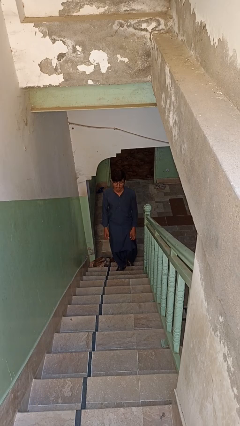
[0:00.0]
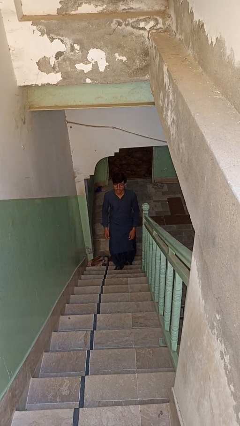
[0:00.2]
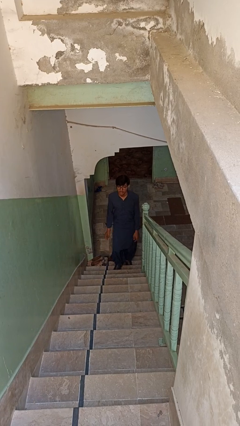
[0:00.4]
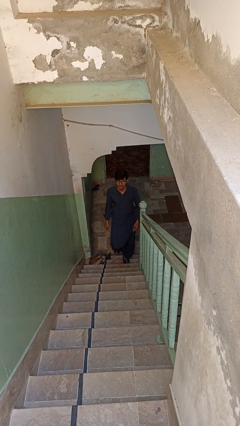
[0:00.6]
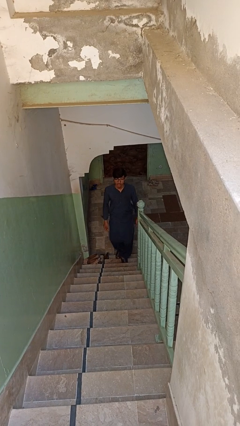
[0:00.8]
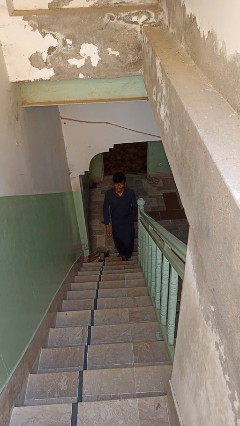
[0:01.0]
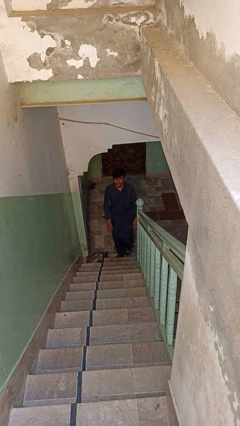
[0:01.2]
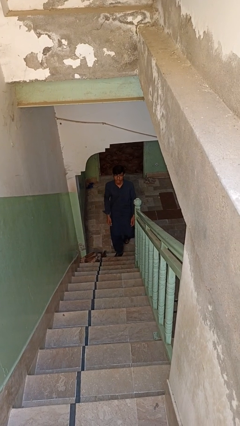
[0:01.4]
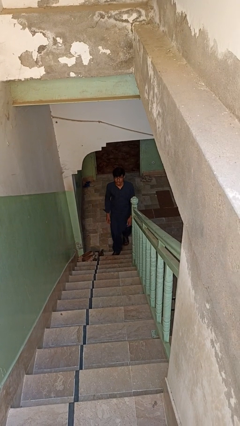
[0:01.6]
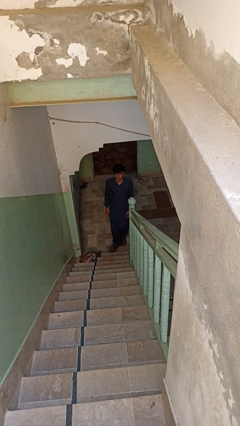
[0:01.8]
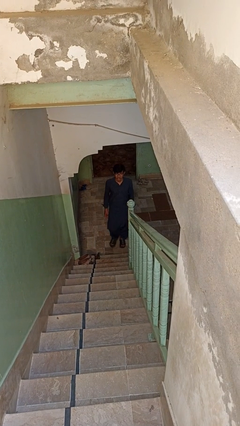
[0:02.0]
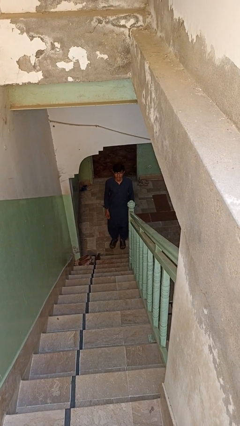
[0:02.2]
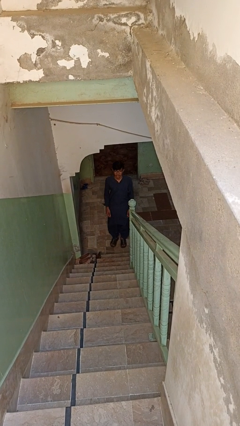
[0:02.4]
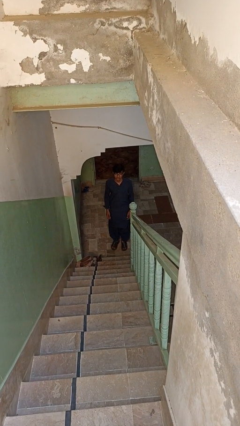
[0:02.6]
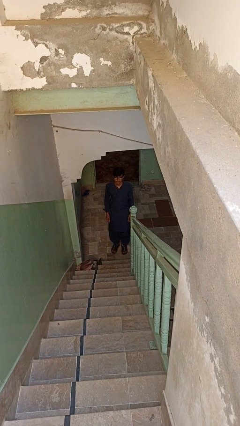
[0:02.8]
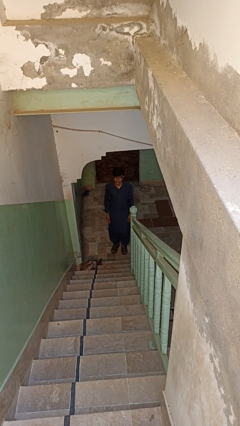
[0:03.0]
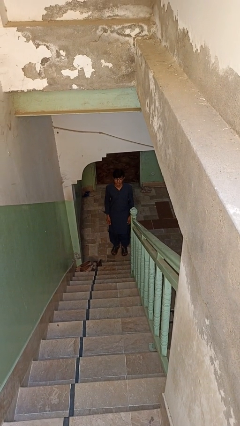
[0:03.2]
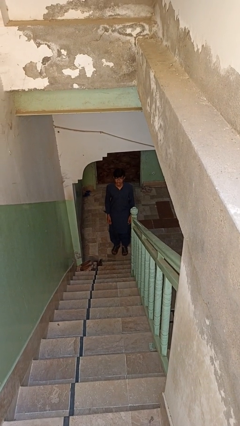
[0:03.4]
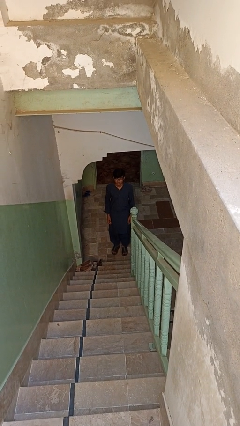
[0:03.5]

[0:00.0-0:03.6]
person climbs down stairs

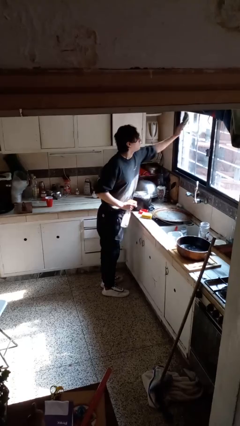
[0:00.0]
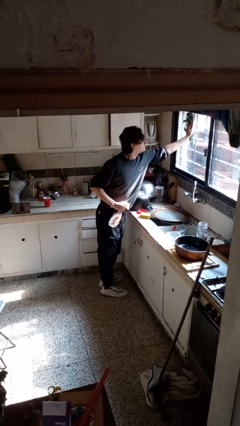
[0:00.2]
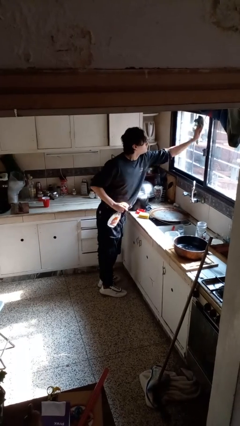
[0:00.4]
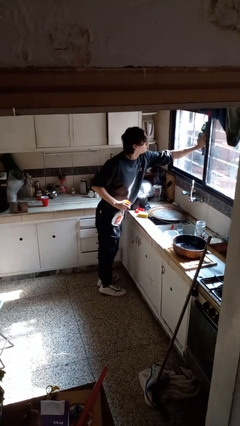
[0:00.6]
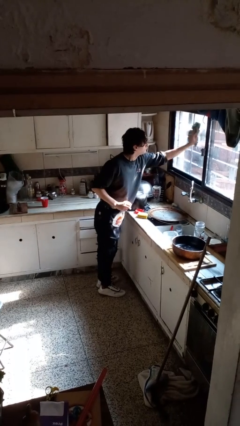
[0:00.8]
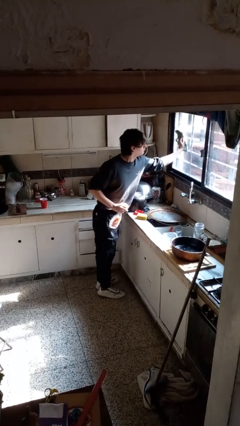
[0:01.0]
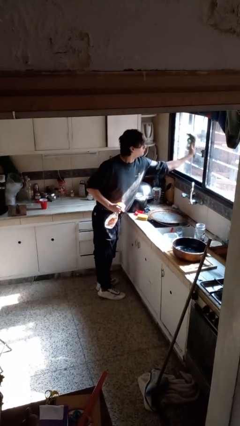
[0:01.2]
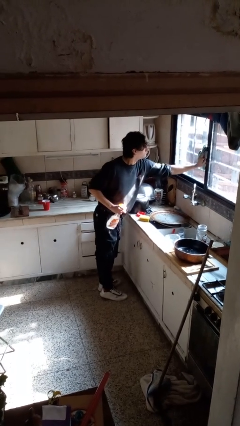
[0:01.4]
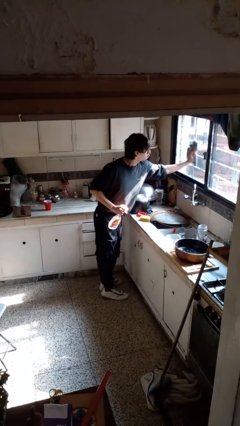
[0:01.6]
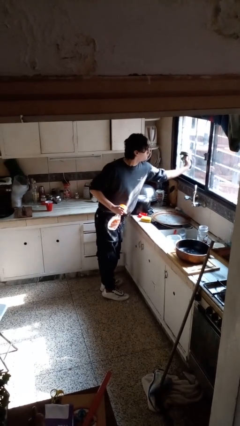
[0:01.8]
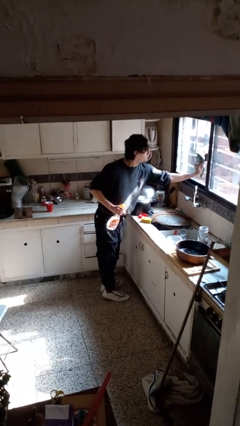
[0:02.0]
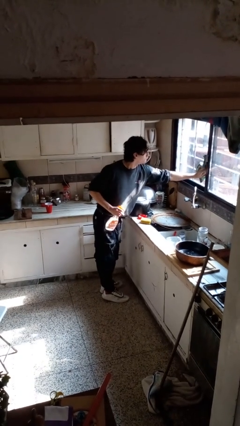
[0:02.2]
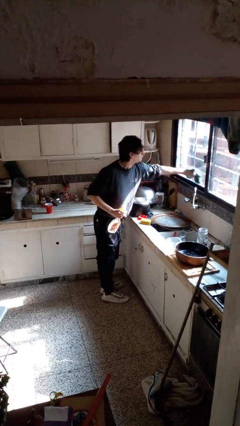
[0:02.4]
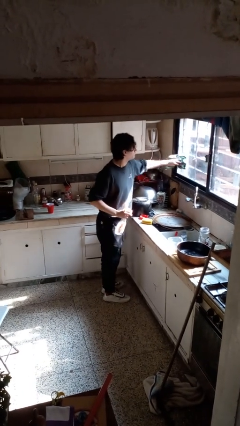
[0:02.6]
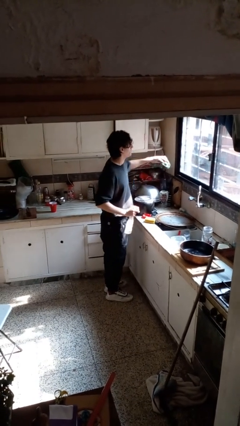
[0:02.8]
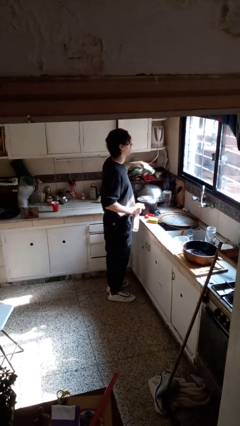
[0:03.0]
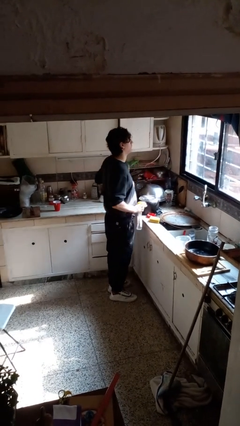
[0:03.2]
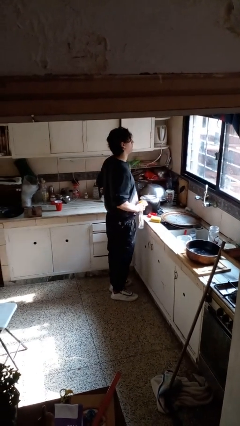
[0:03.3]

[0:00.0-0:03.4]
person washes window

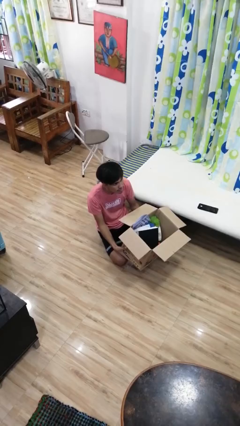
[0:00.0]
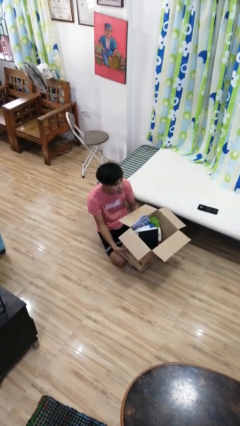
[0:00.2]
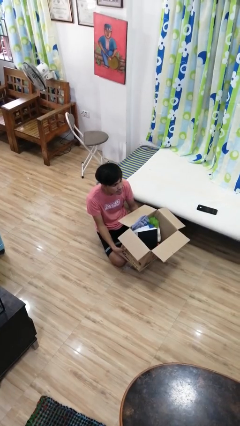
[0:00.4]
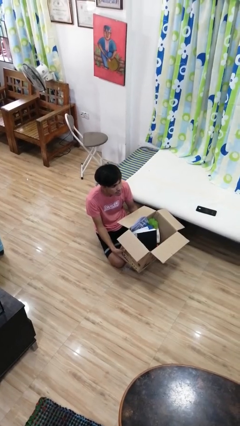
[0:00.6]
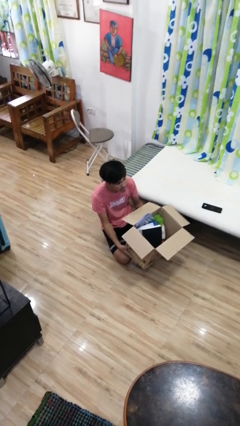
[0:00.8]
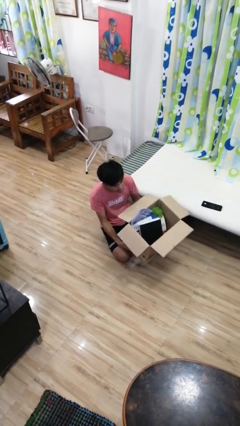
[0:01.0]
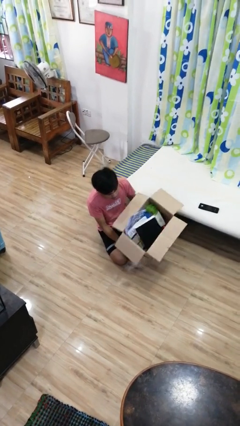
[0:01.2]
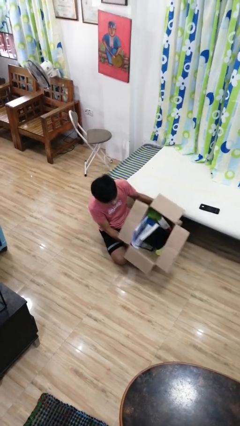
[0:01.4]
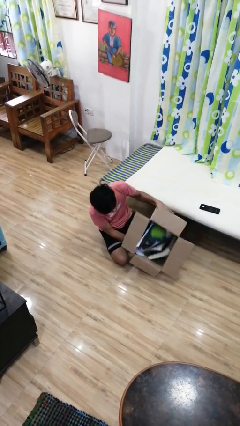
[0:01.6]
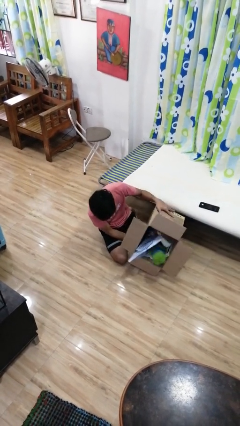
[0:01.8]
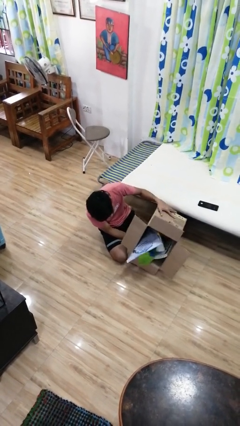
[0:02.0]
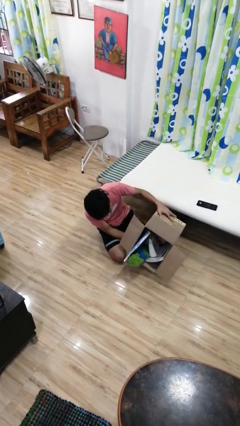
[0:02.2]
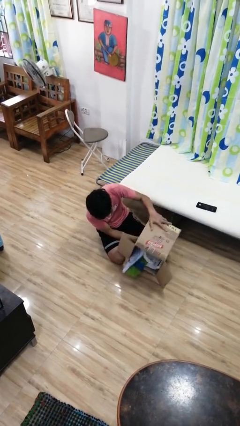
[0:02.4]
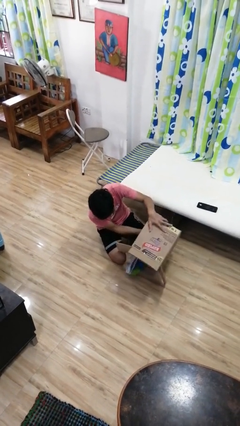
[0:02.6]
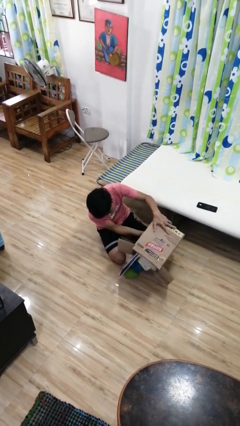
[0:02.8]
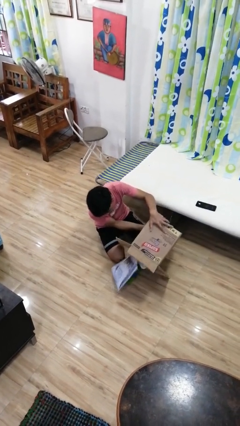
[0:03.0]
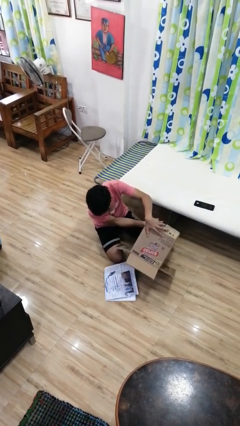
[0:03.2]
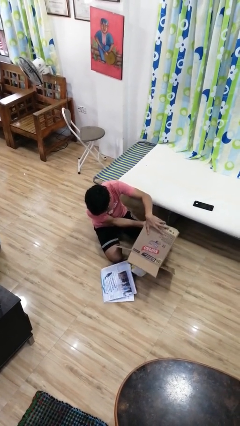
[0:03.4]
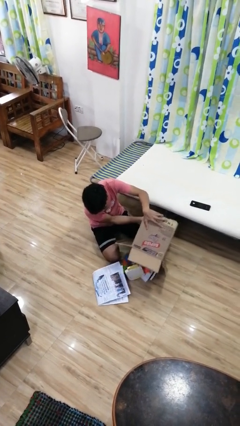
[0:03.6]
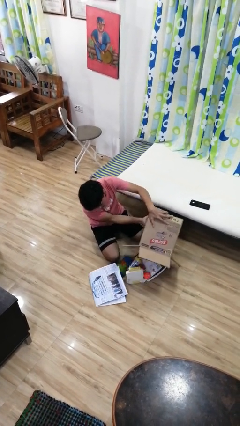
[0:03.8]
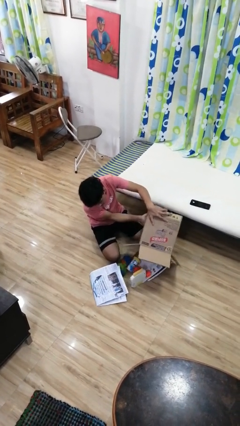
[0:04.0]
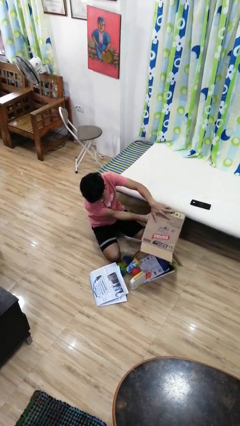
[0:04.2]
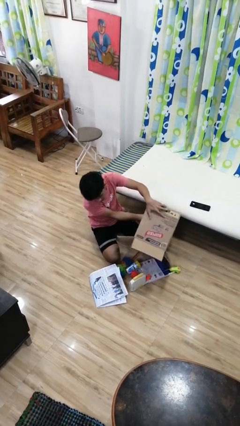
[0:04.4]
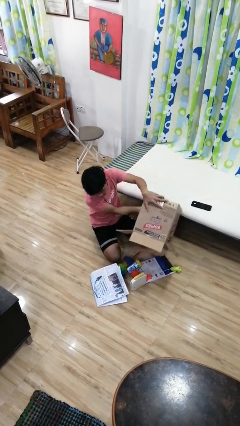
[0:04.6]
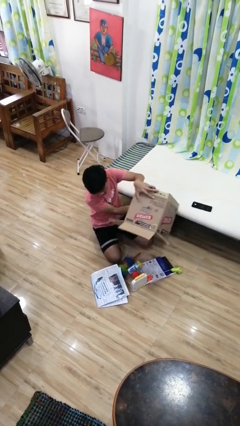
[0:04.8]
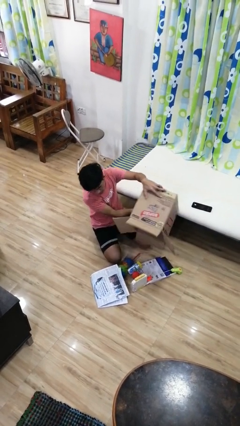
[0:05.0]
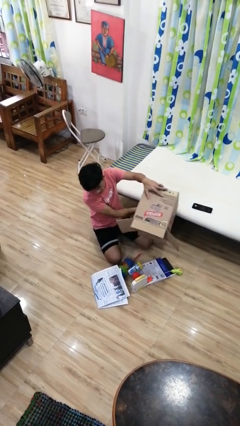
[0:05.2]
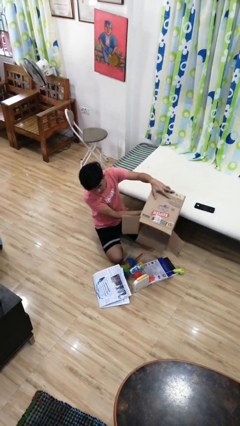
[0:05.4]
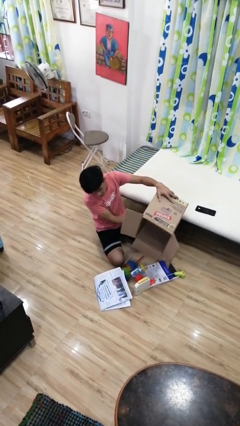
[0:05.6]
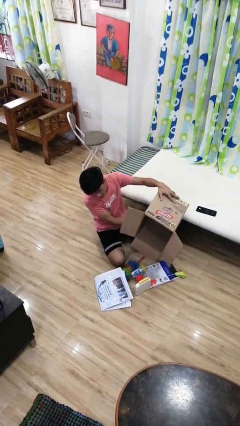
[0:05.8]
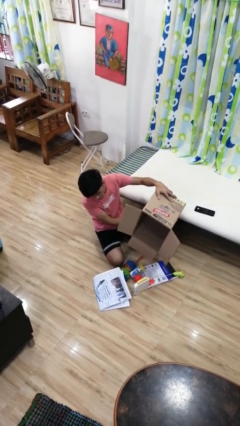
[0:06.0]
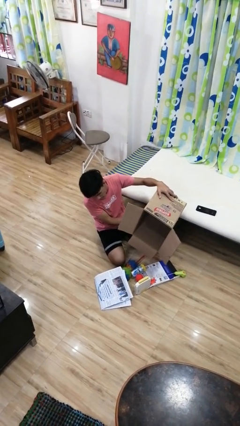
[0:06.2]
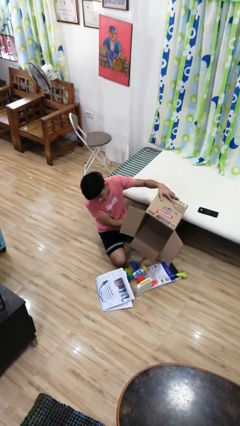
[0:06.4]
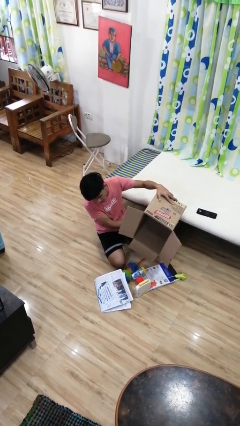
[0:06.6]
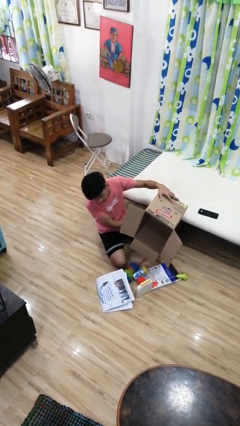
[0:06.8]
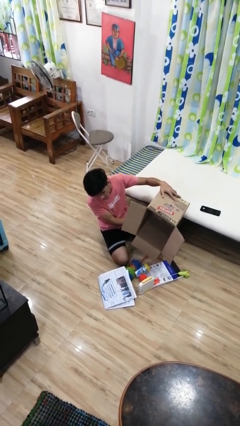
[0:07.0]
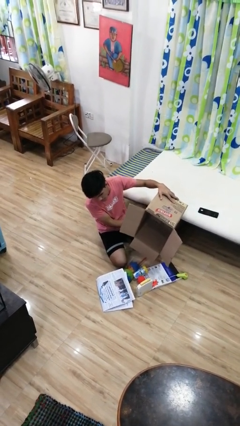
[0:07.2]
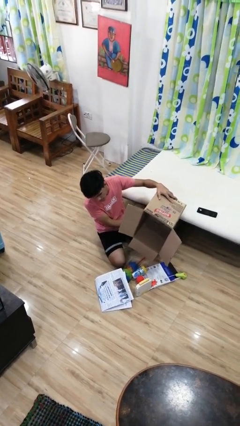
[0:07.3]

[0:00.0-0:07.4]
person unloads box onto floor

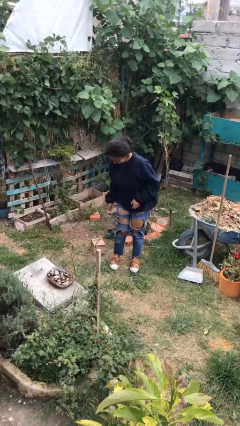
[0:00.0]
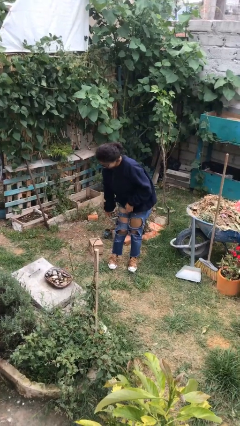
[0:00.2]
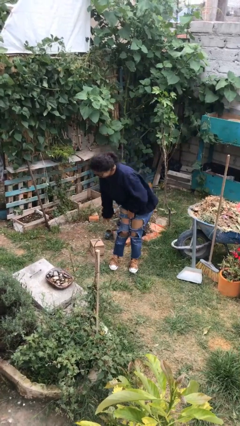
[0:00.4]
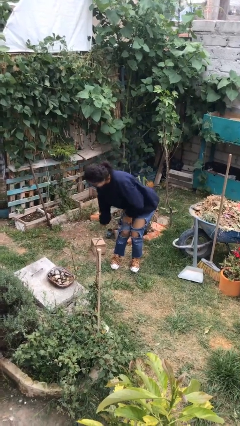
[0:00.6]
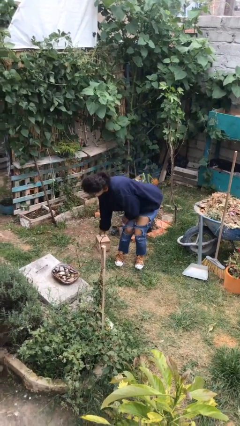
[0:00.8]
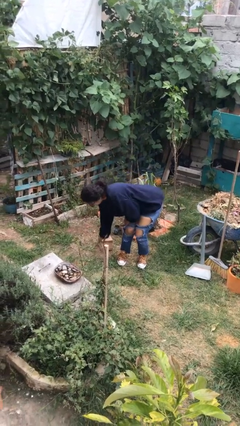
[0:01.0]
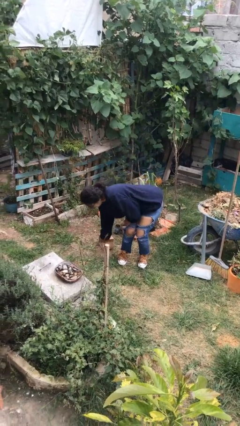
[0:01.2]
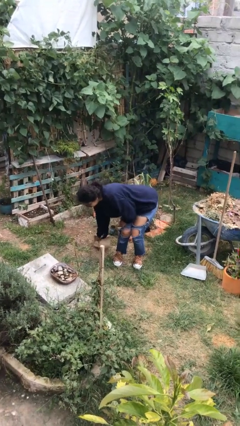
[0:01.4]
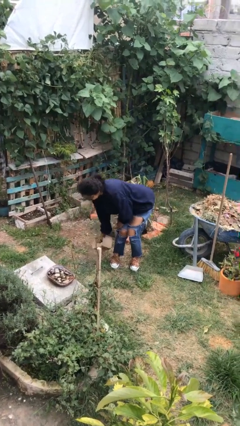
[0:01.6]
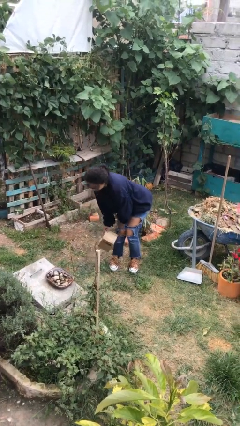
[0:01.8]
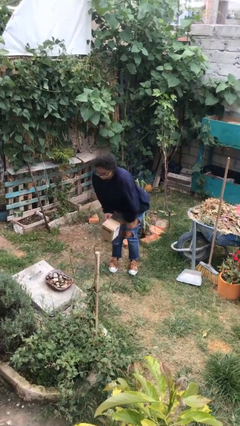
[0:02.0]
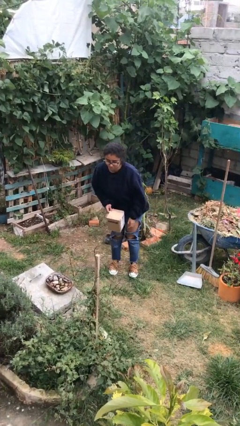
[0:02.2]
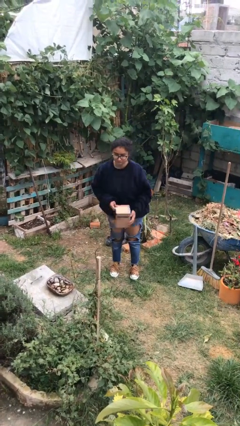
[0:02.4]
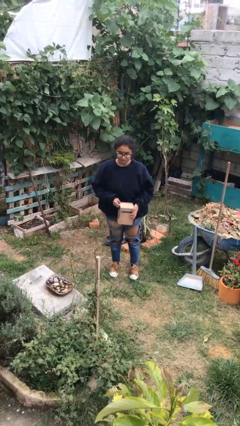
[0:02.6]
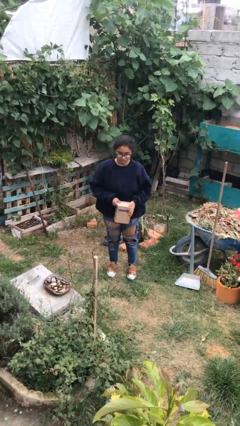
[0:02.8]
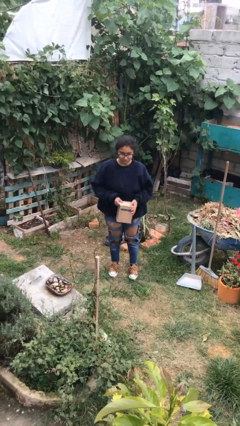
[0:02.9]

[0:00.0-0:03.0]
person picks up object from floor
